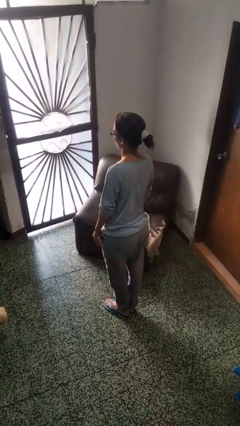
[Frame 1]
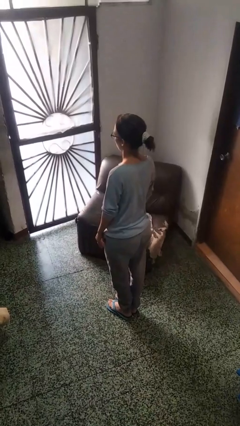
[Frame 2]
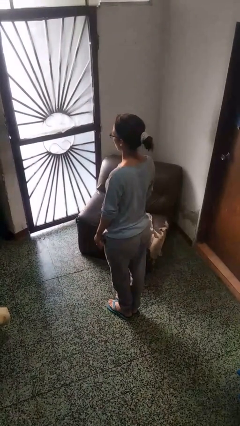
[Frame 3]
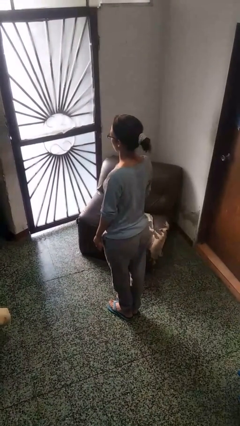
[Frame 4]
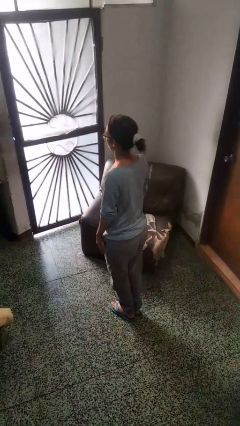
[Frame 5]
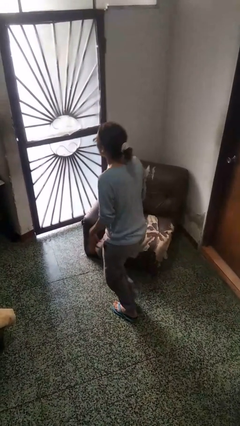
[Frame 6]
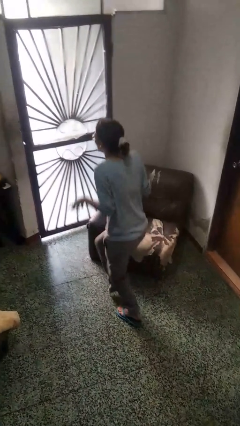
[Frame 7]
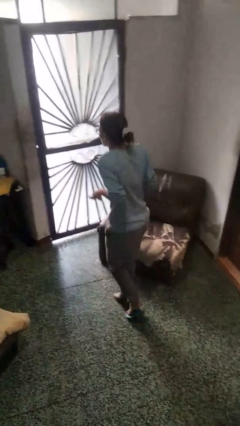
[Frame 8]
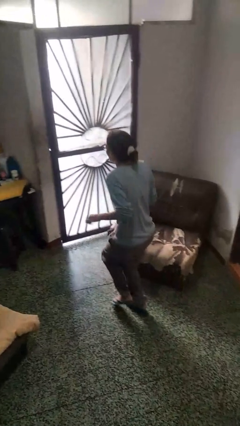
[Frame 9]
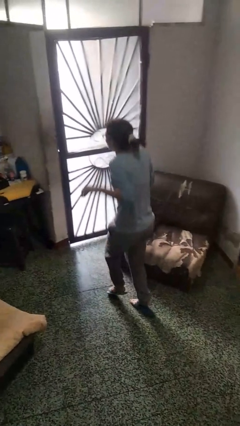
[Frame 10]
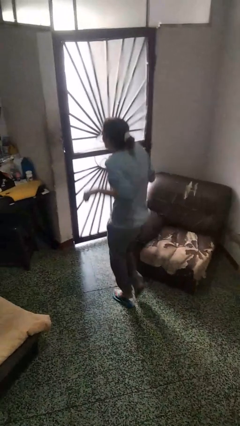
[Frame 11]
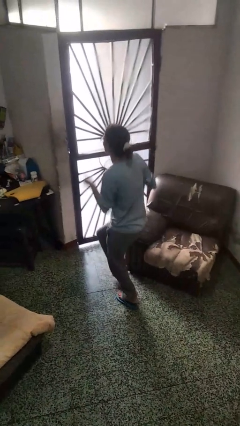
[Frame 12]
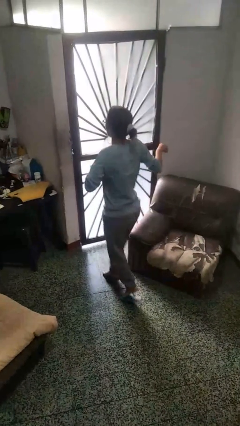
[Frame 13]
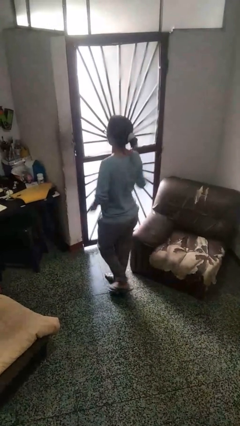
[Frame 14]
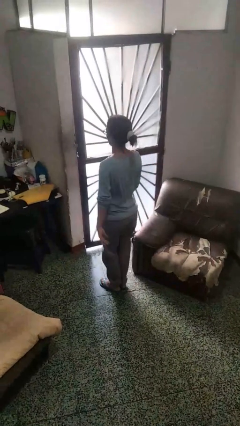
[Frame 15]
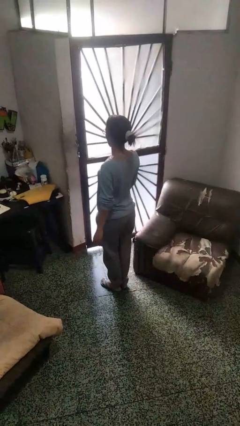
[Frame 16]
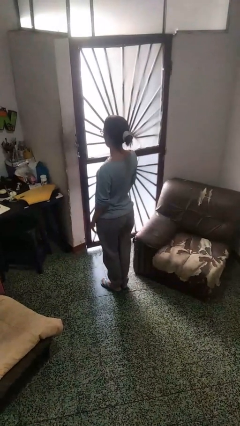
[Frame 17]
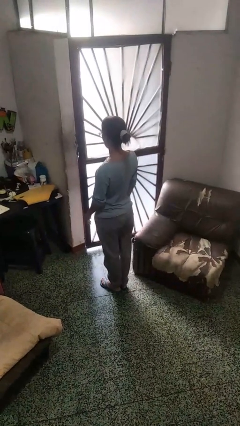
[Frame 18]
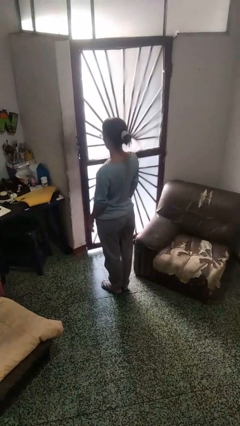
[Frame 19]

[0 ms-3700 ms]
person walks tiptoe

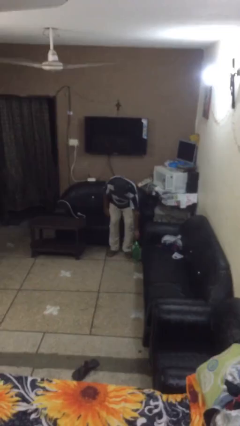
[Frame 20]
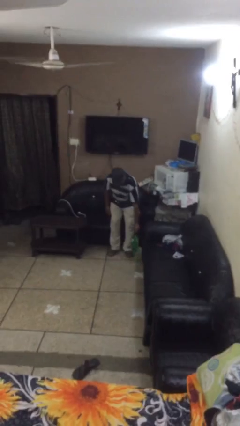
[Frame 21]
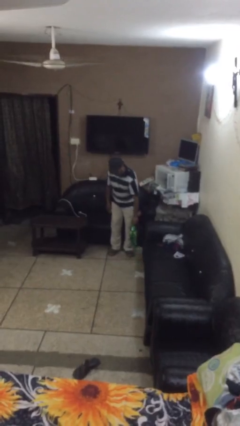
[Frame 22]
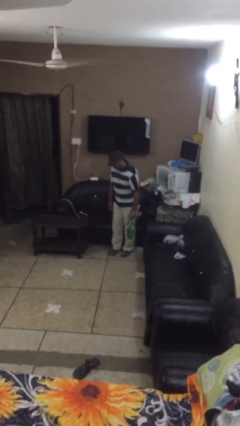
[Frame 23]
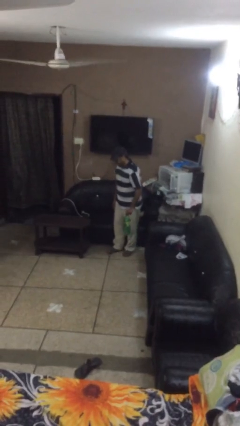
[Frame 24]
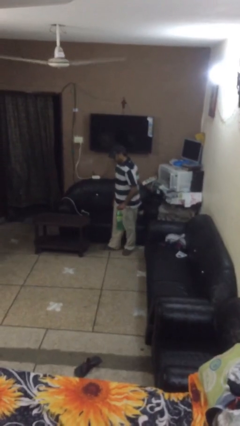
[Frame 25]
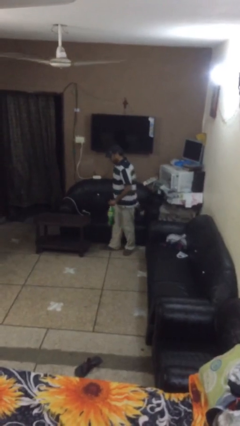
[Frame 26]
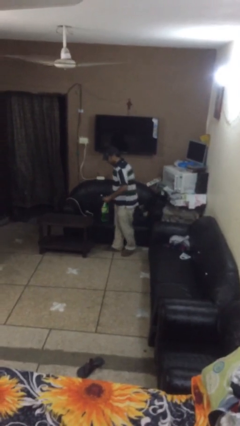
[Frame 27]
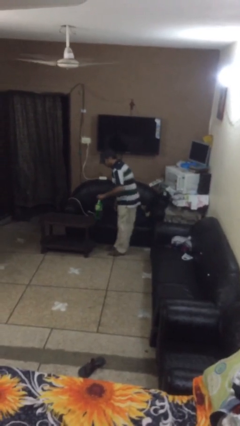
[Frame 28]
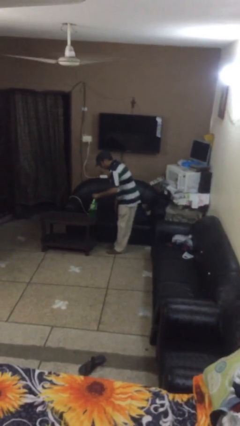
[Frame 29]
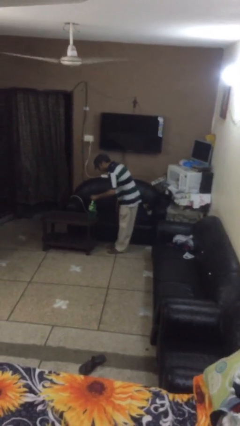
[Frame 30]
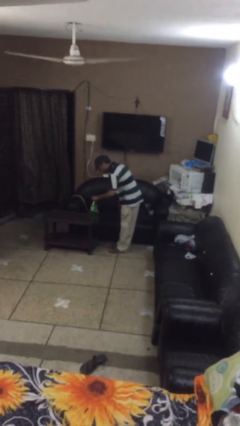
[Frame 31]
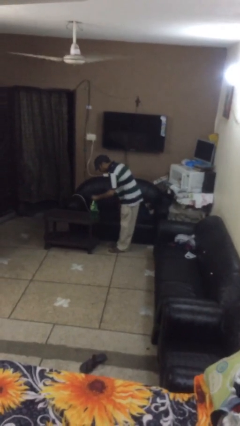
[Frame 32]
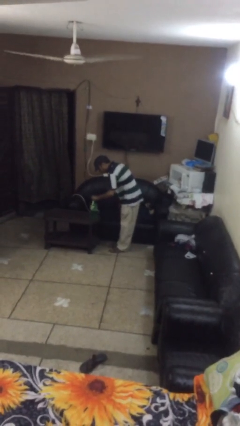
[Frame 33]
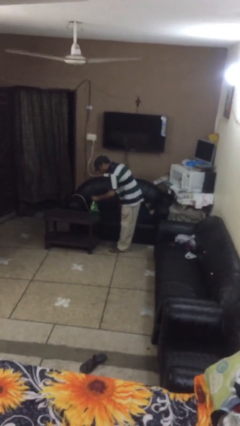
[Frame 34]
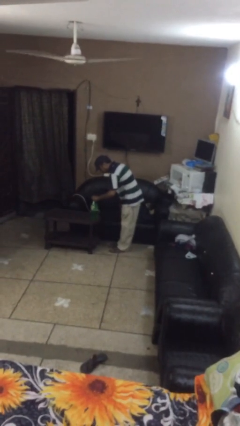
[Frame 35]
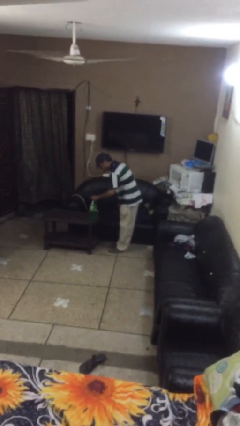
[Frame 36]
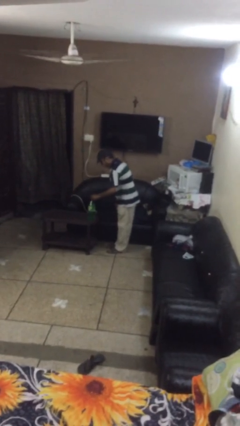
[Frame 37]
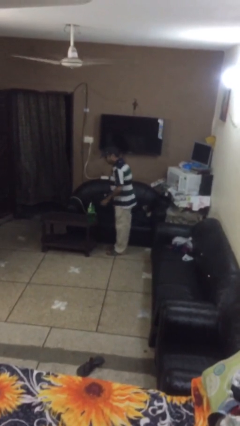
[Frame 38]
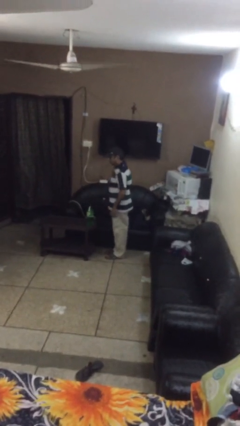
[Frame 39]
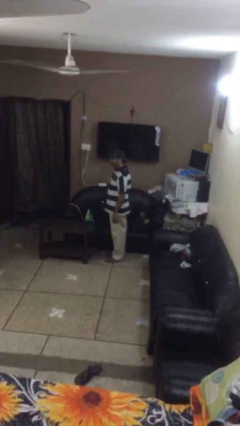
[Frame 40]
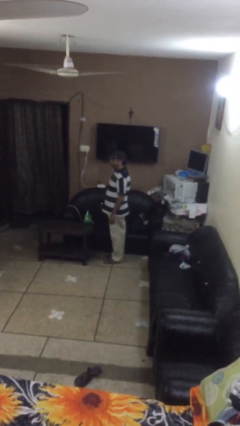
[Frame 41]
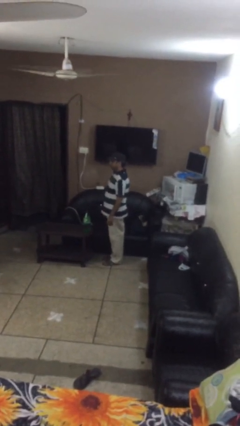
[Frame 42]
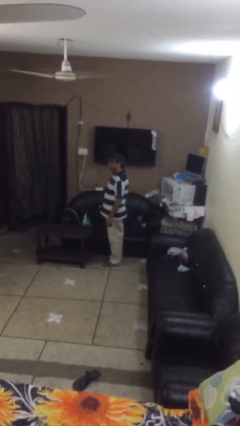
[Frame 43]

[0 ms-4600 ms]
person puts down object on shelf

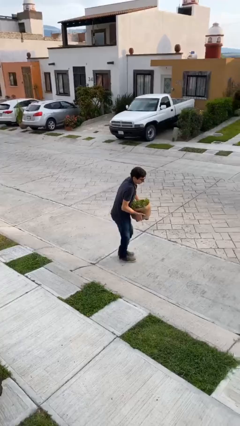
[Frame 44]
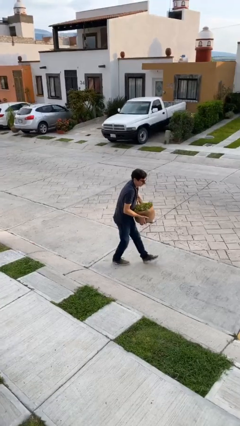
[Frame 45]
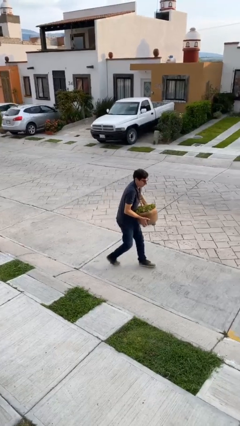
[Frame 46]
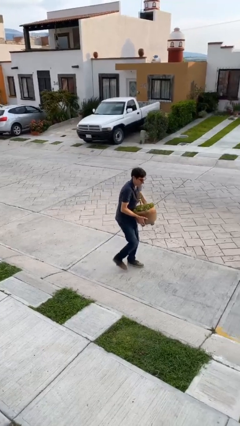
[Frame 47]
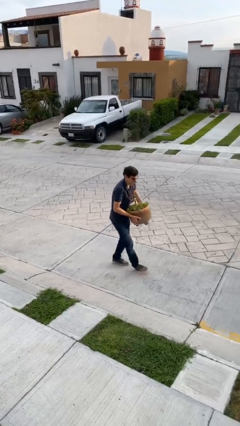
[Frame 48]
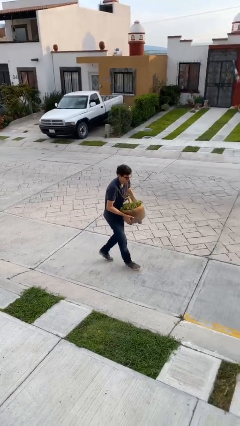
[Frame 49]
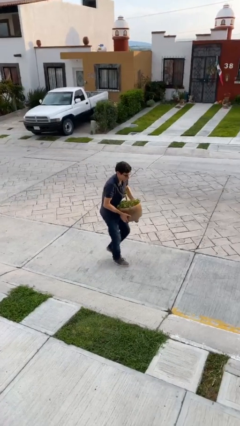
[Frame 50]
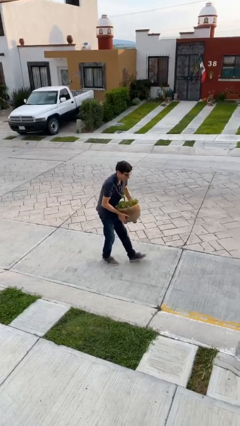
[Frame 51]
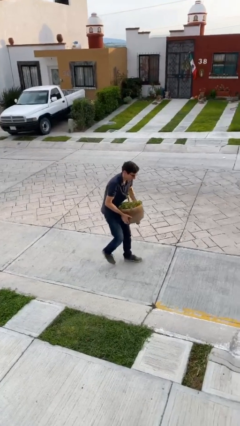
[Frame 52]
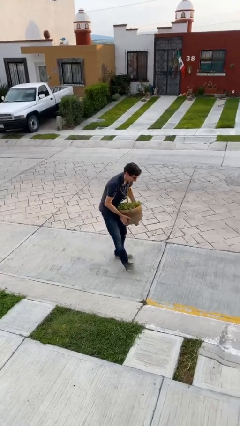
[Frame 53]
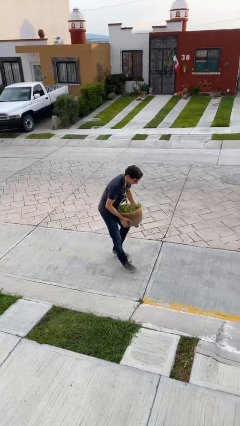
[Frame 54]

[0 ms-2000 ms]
person carries heavy object

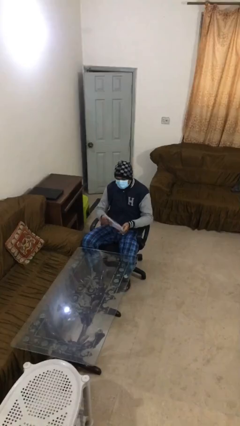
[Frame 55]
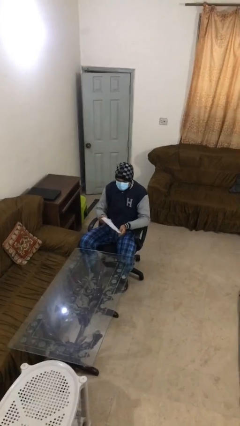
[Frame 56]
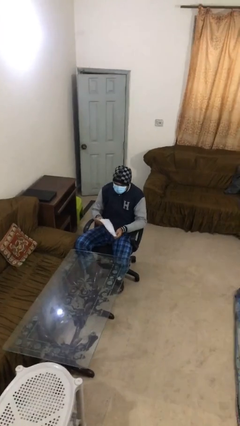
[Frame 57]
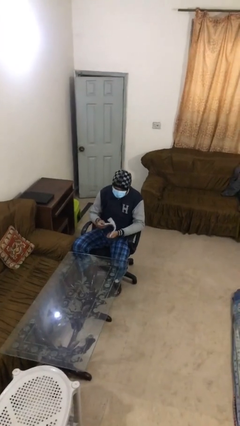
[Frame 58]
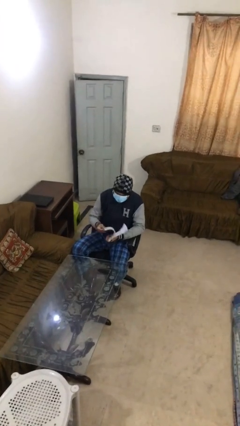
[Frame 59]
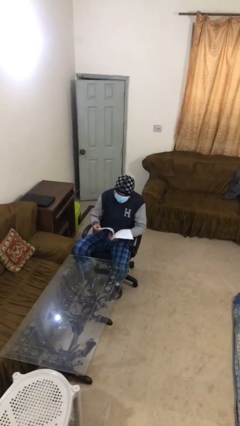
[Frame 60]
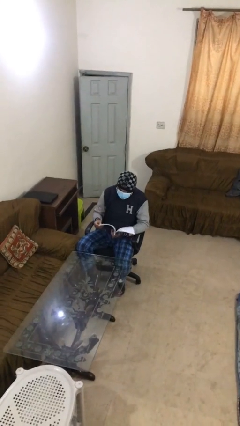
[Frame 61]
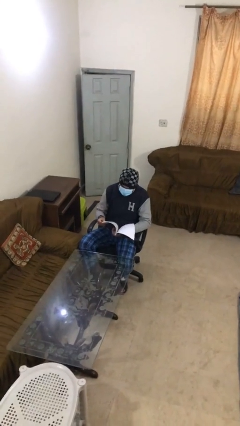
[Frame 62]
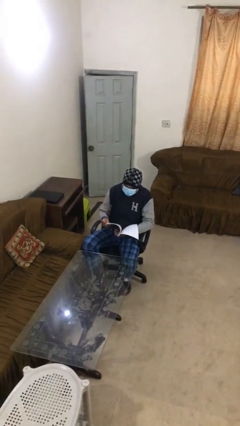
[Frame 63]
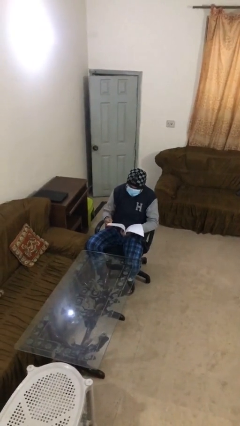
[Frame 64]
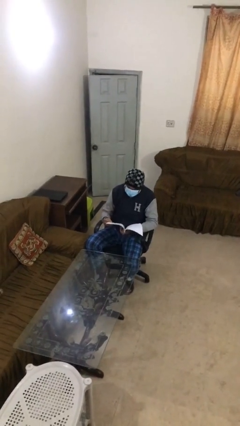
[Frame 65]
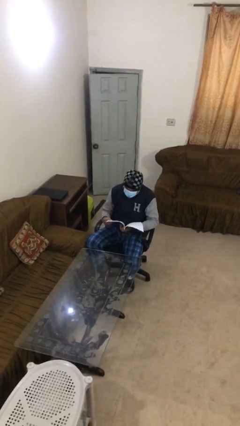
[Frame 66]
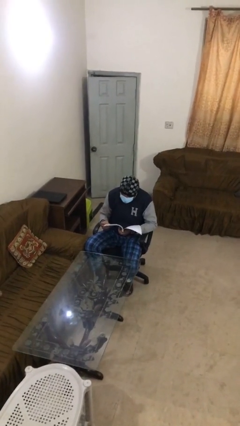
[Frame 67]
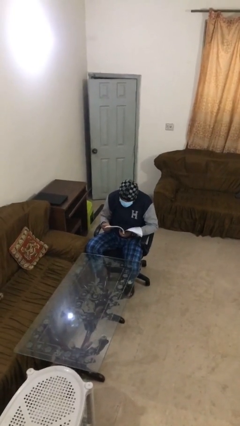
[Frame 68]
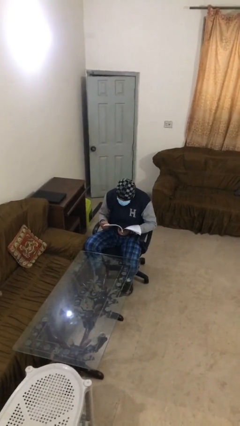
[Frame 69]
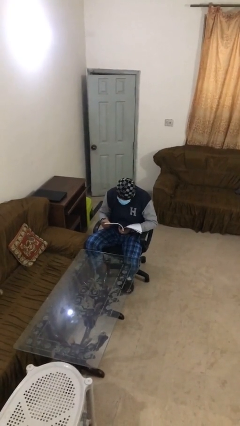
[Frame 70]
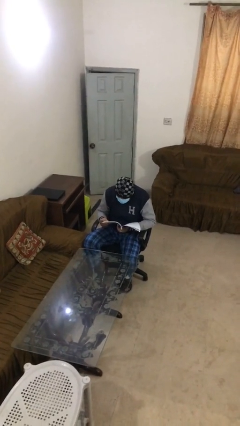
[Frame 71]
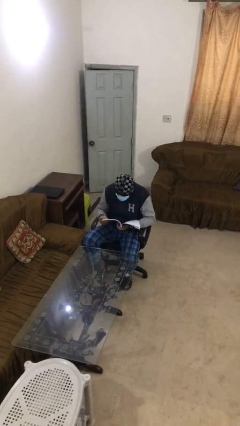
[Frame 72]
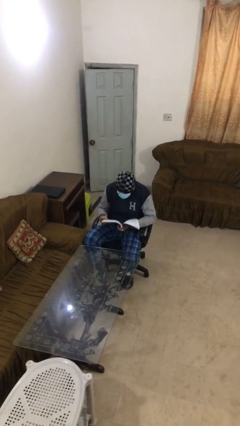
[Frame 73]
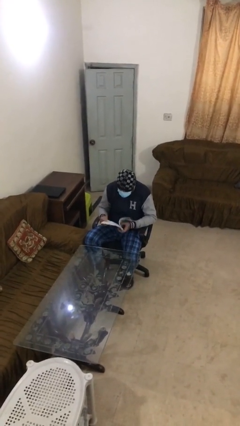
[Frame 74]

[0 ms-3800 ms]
person reads document

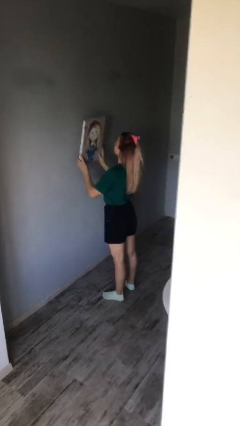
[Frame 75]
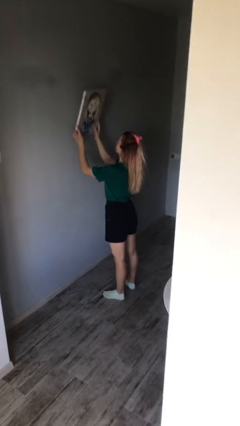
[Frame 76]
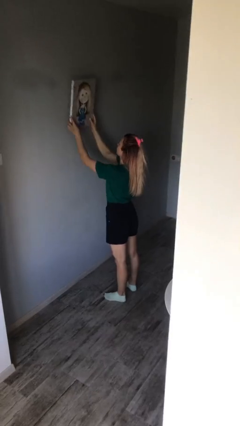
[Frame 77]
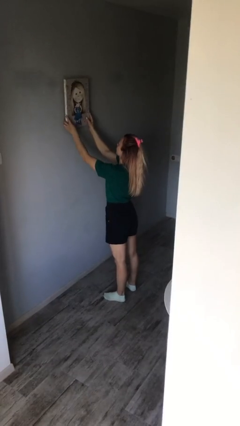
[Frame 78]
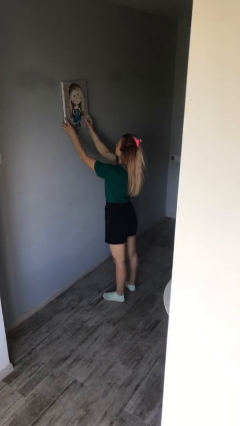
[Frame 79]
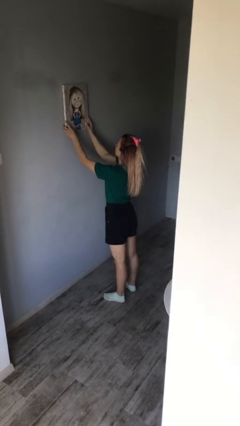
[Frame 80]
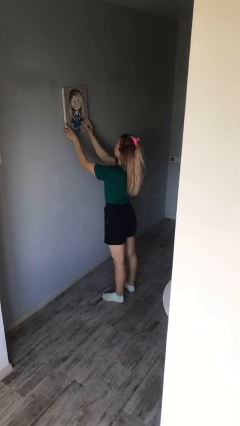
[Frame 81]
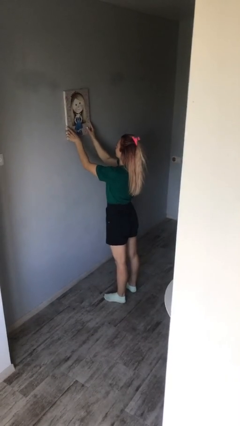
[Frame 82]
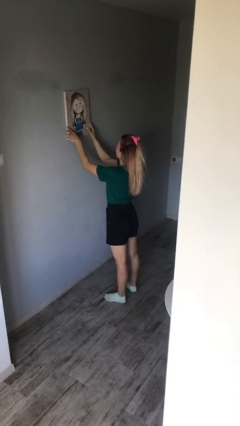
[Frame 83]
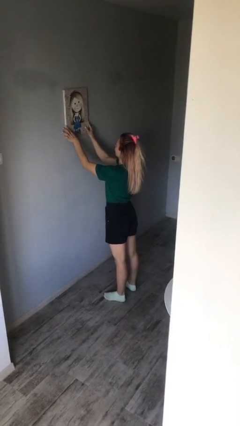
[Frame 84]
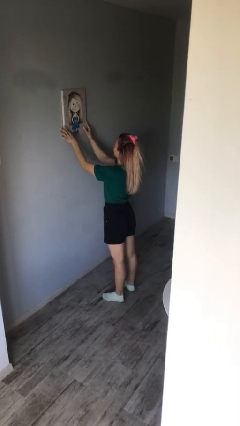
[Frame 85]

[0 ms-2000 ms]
person puts up picture frame

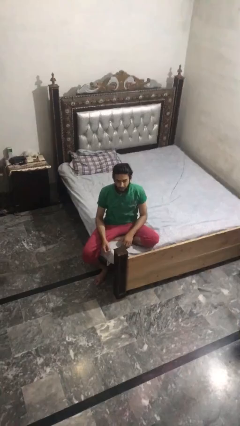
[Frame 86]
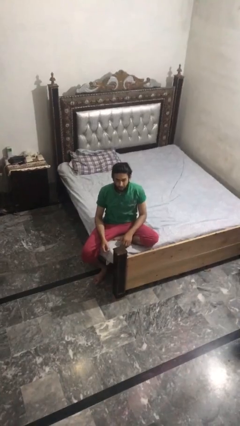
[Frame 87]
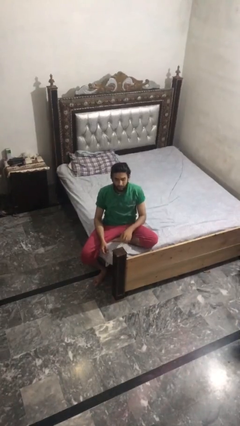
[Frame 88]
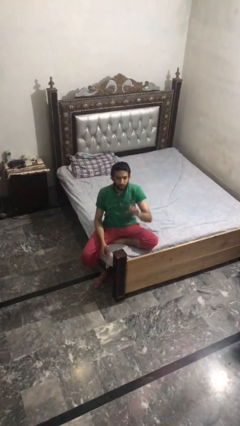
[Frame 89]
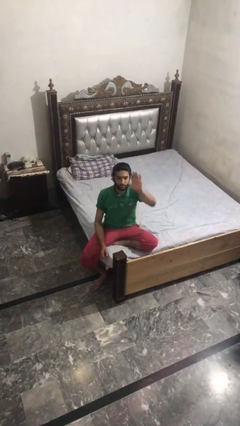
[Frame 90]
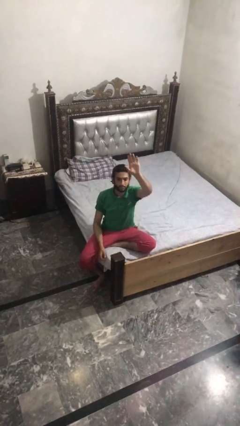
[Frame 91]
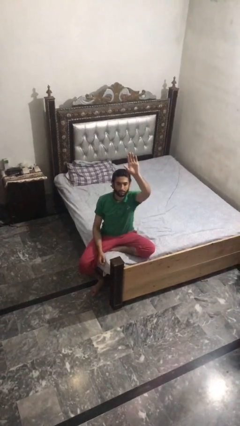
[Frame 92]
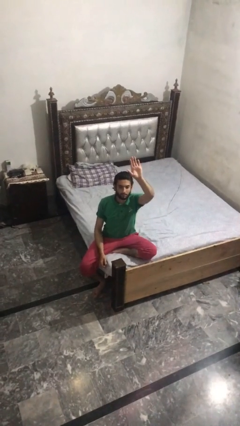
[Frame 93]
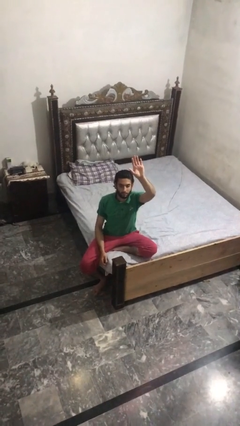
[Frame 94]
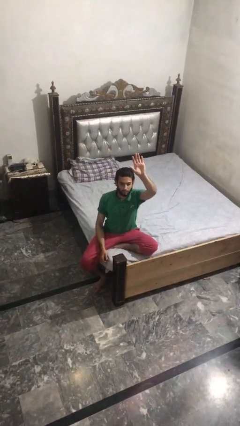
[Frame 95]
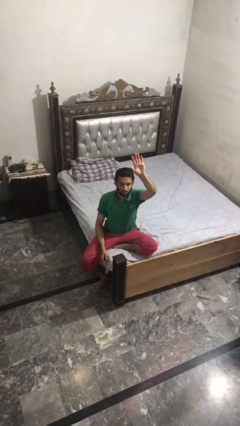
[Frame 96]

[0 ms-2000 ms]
person gestures raise hand
